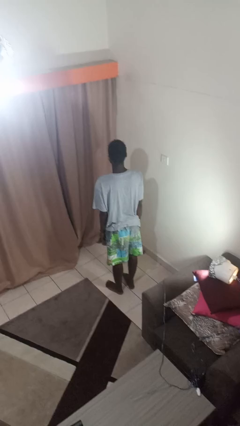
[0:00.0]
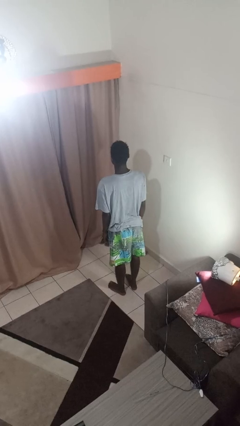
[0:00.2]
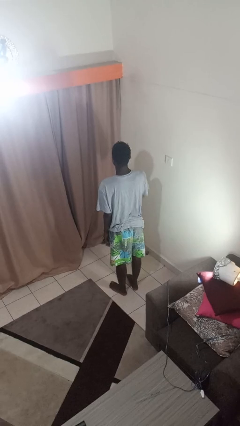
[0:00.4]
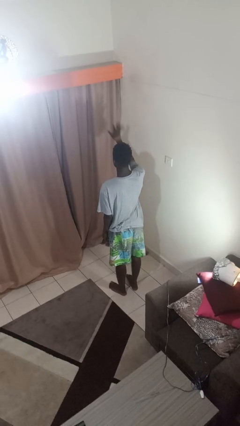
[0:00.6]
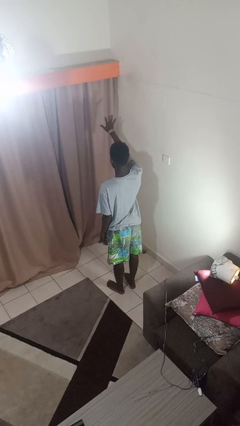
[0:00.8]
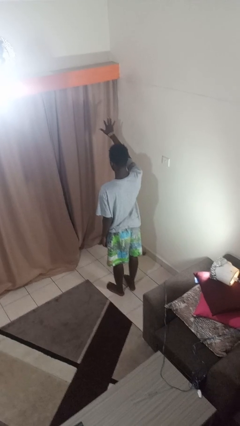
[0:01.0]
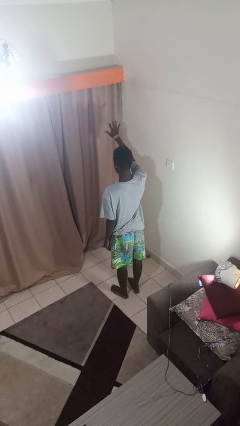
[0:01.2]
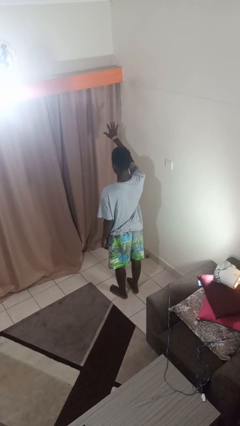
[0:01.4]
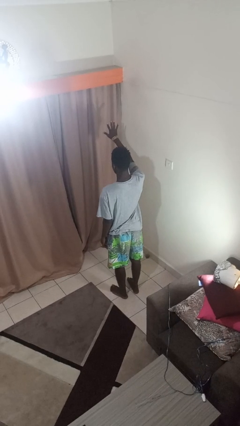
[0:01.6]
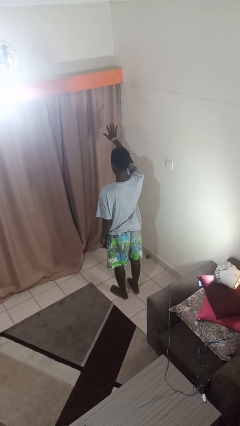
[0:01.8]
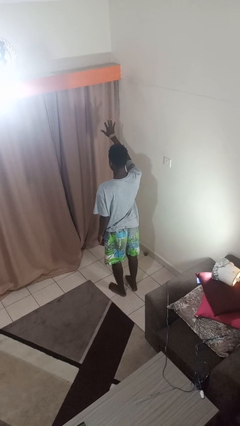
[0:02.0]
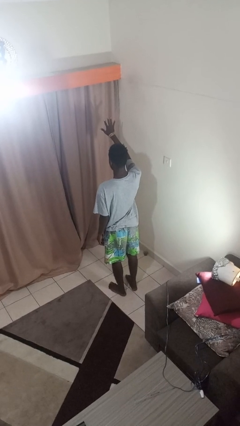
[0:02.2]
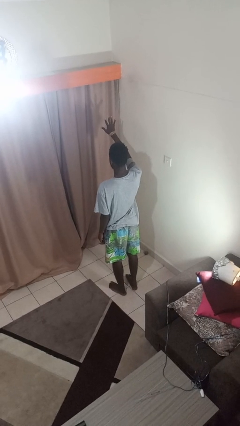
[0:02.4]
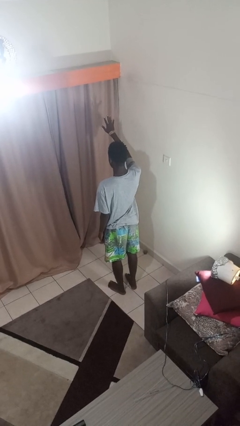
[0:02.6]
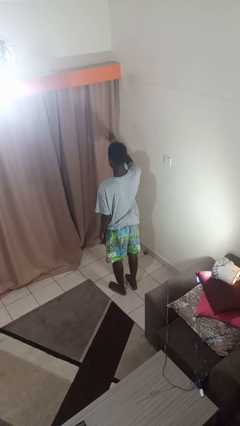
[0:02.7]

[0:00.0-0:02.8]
person gestures number five

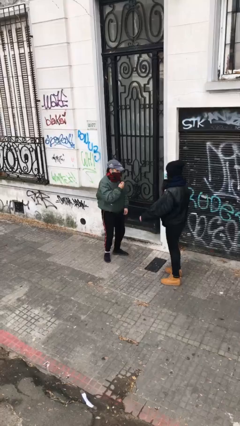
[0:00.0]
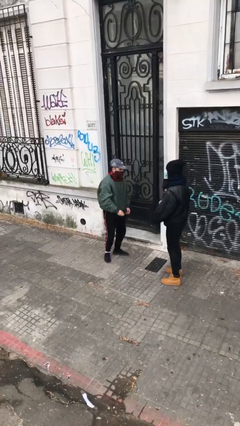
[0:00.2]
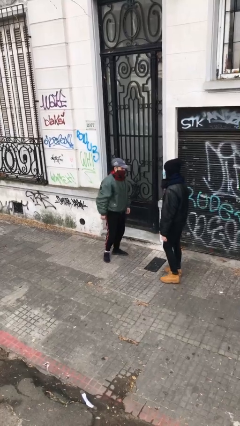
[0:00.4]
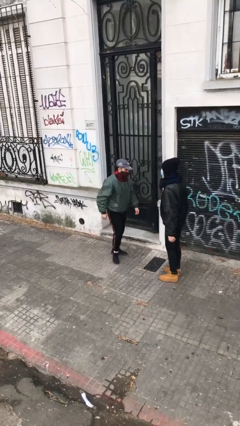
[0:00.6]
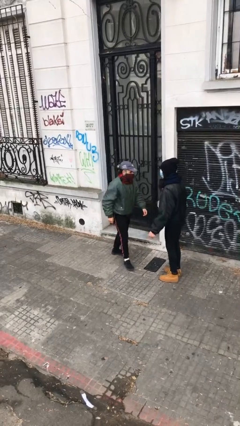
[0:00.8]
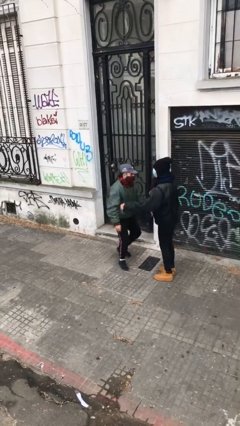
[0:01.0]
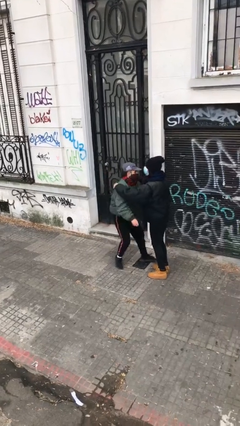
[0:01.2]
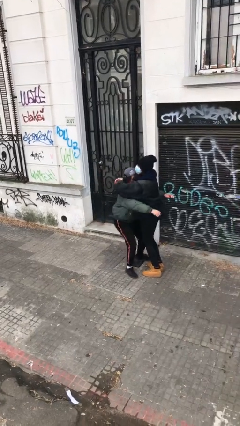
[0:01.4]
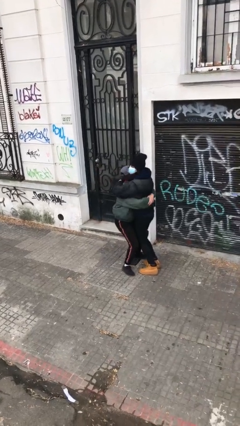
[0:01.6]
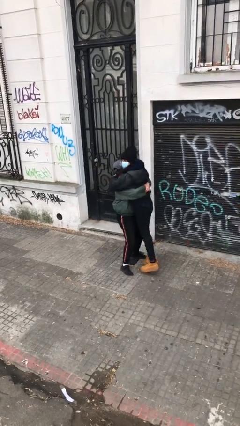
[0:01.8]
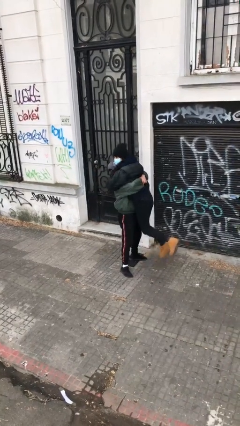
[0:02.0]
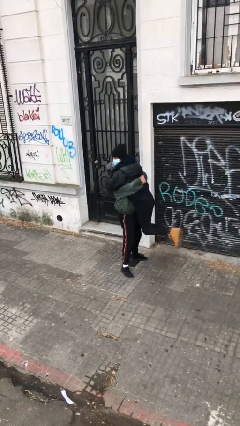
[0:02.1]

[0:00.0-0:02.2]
person picks up person

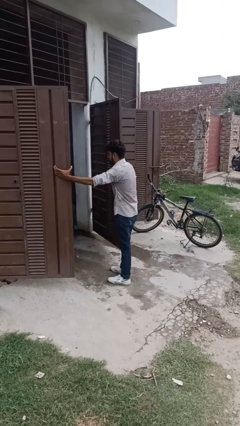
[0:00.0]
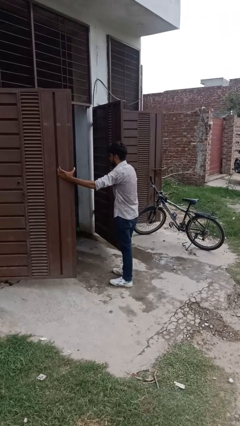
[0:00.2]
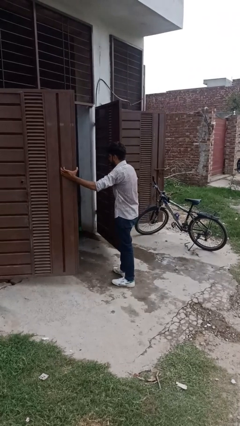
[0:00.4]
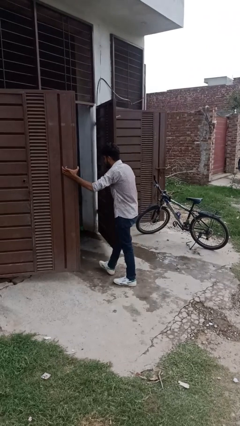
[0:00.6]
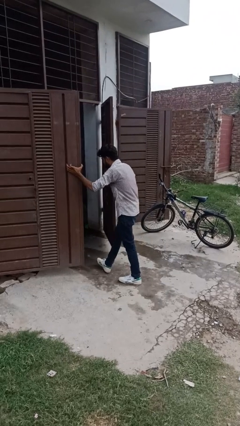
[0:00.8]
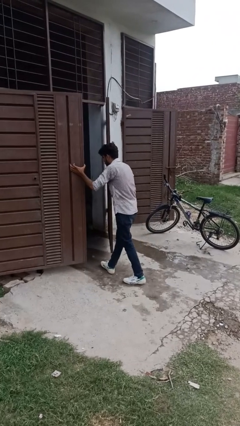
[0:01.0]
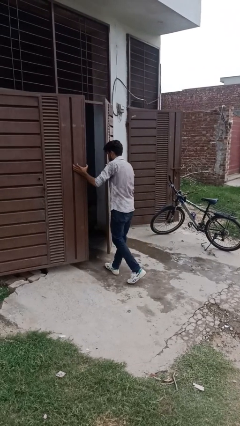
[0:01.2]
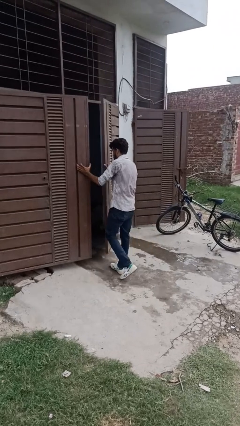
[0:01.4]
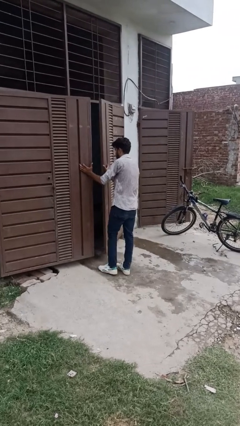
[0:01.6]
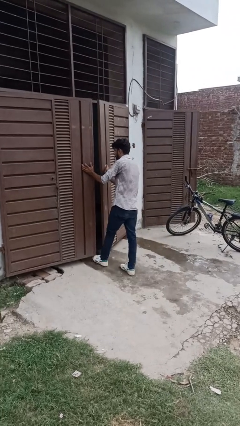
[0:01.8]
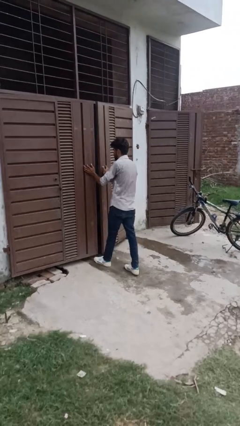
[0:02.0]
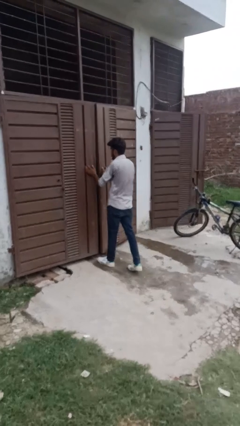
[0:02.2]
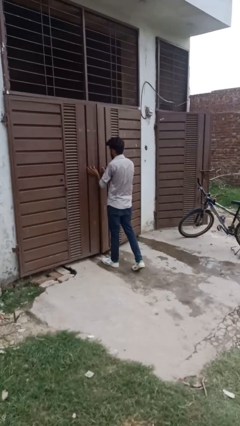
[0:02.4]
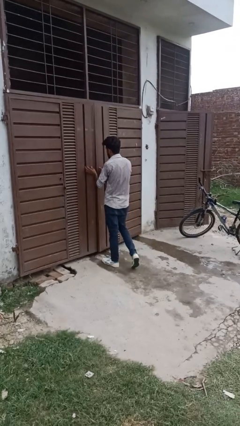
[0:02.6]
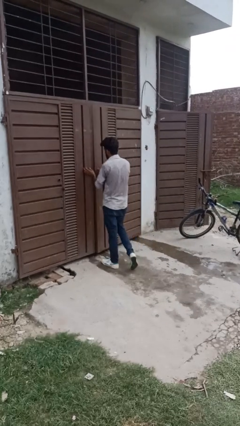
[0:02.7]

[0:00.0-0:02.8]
person closes gate

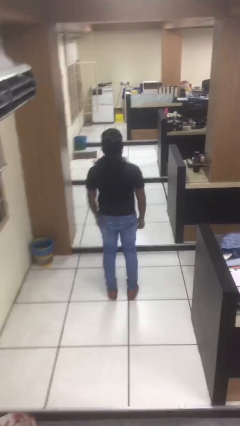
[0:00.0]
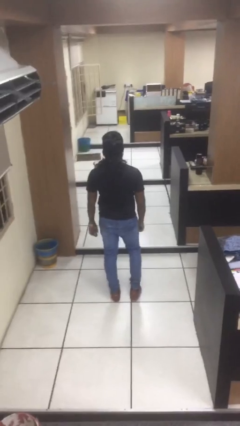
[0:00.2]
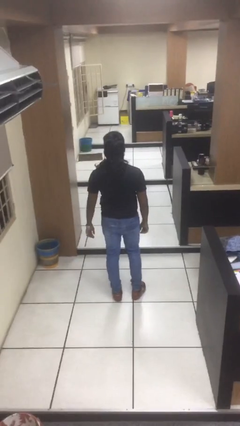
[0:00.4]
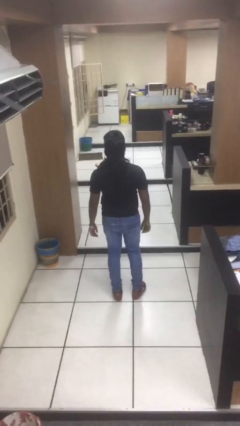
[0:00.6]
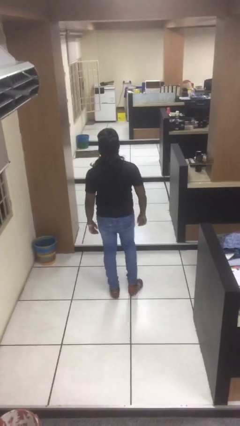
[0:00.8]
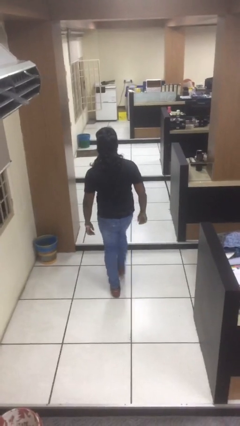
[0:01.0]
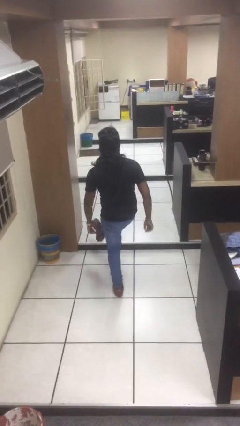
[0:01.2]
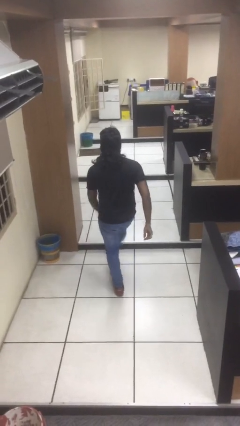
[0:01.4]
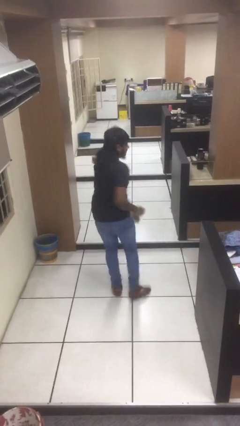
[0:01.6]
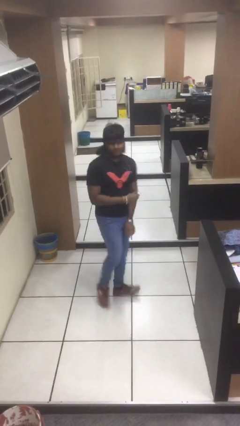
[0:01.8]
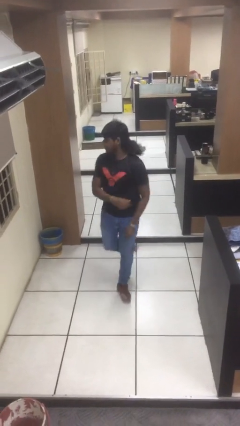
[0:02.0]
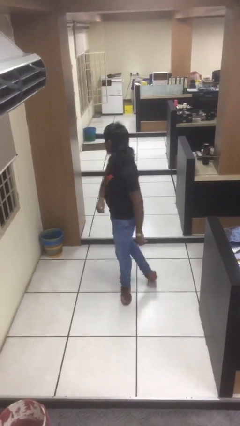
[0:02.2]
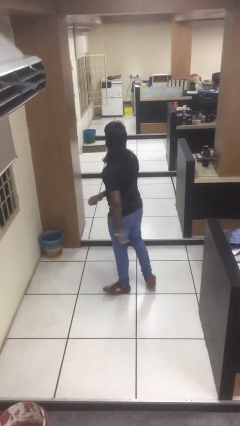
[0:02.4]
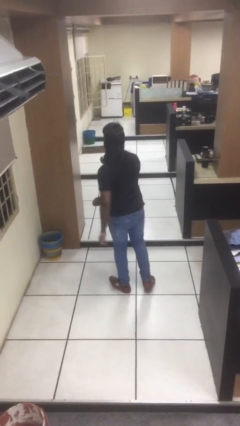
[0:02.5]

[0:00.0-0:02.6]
person twirls

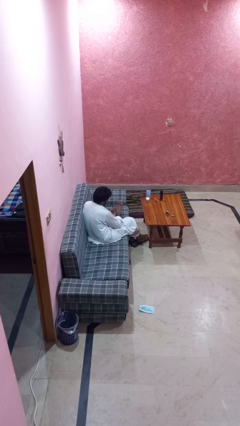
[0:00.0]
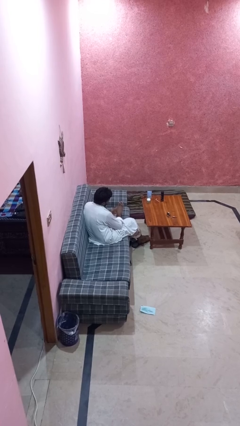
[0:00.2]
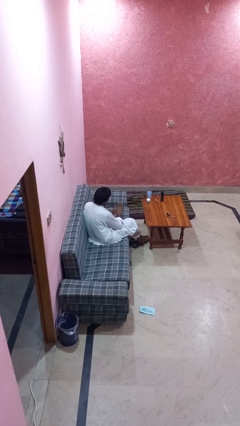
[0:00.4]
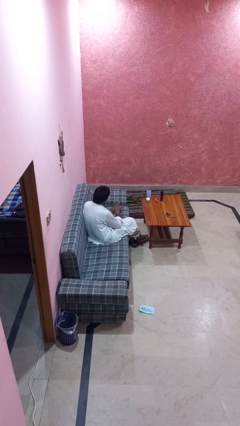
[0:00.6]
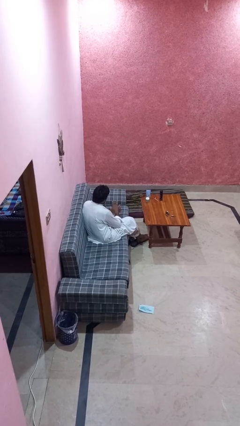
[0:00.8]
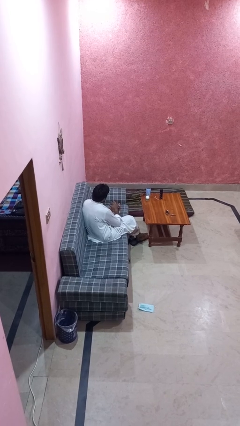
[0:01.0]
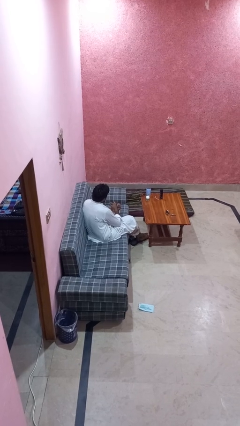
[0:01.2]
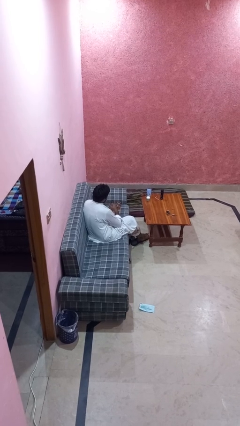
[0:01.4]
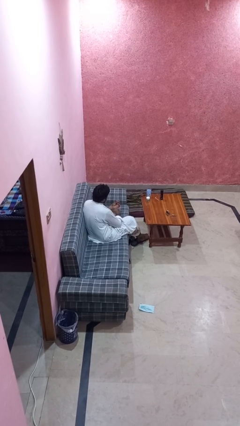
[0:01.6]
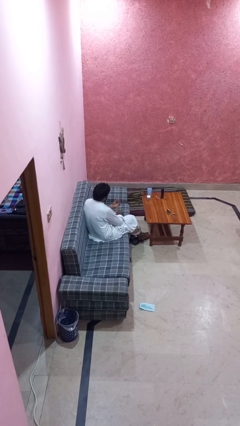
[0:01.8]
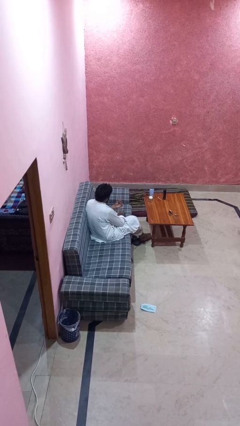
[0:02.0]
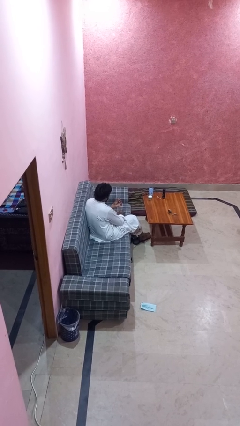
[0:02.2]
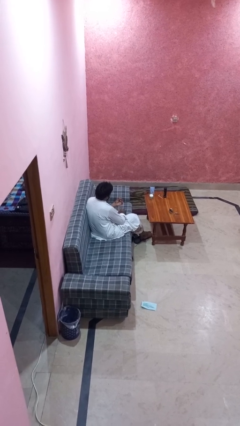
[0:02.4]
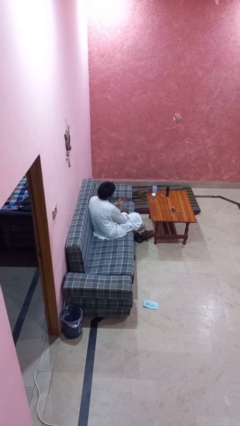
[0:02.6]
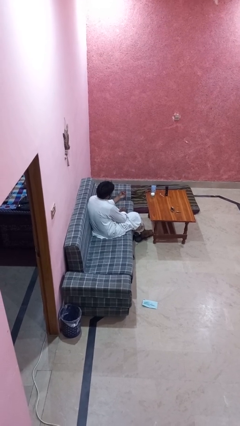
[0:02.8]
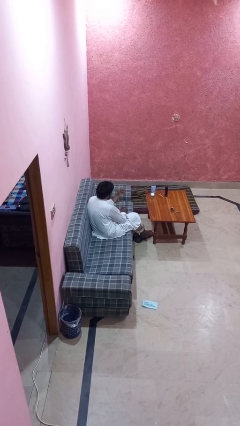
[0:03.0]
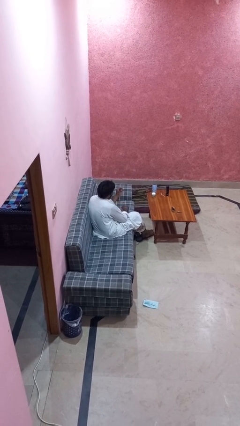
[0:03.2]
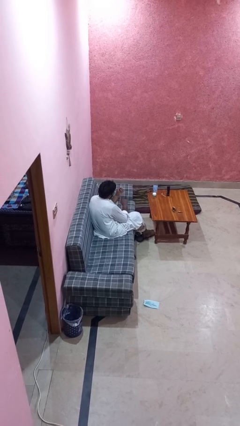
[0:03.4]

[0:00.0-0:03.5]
person takes off ring

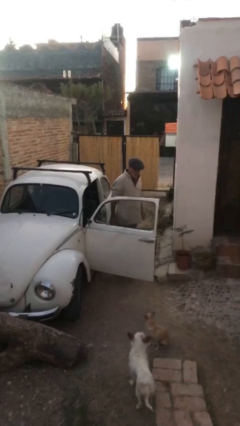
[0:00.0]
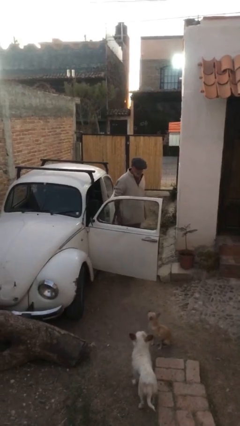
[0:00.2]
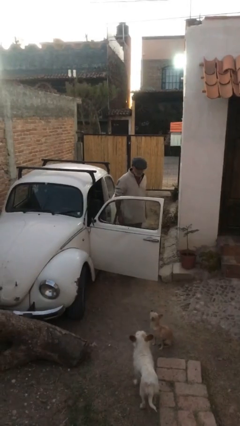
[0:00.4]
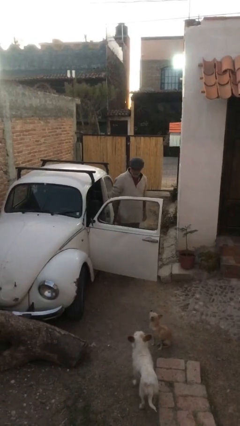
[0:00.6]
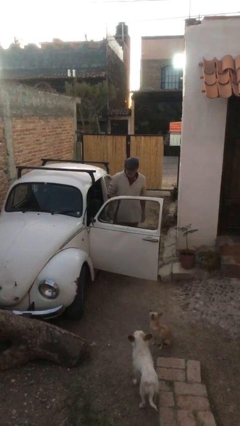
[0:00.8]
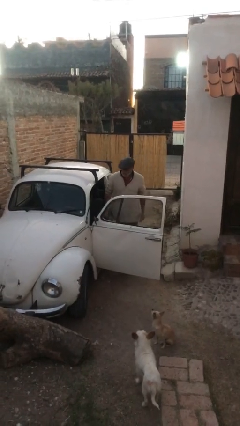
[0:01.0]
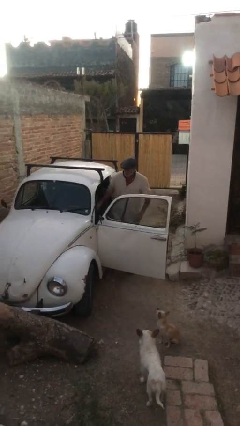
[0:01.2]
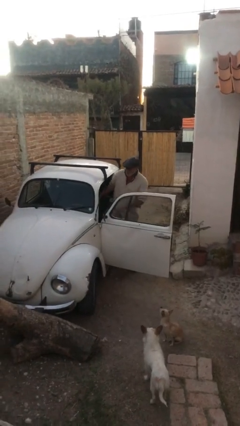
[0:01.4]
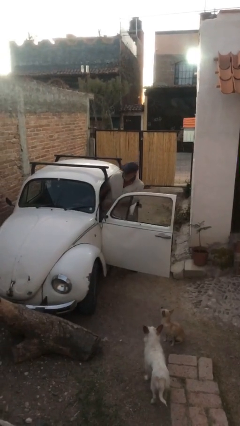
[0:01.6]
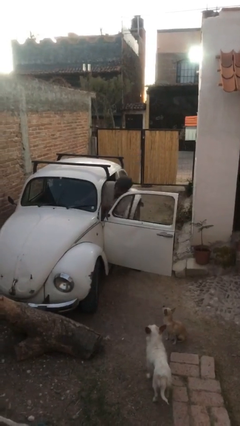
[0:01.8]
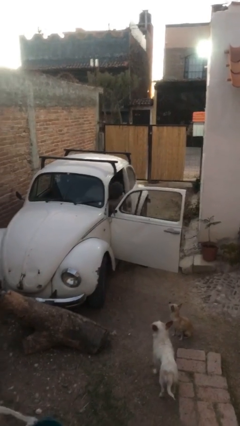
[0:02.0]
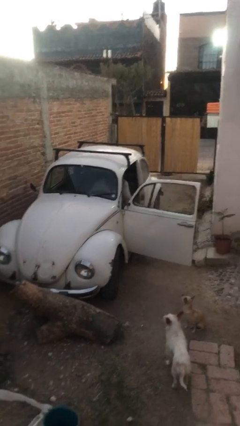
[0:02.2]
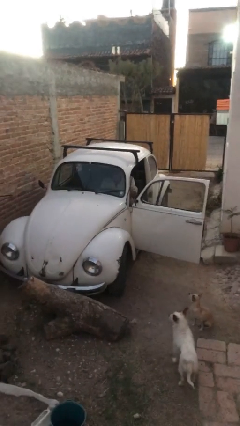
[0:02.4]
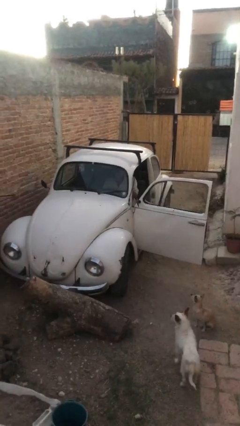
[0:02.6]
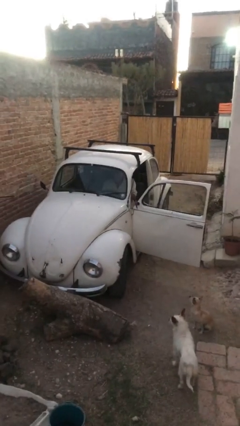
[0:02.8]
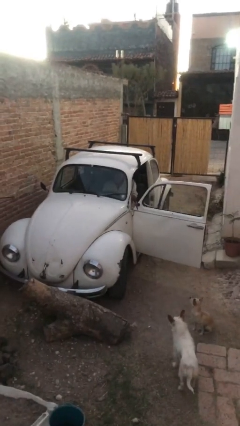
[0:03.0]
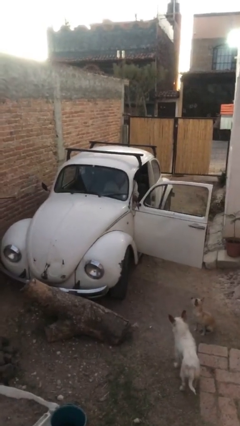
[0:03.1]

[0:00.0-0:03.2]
person enters car
